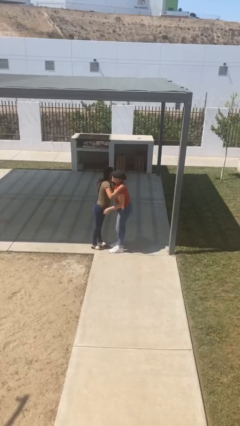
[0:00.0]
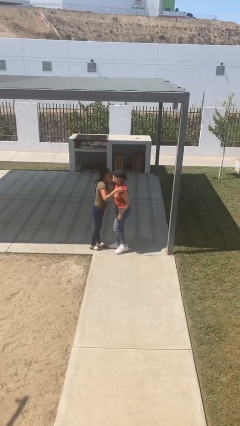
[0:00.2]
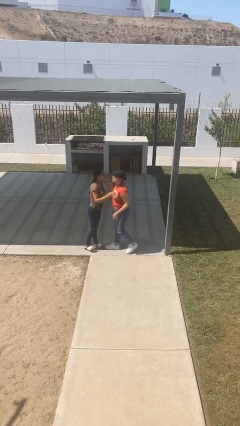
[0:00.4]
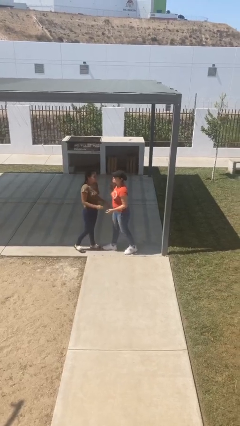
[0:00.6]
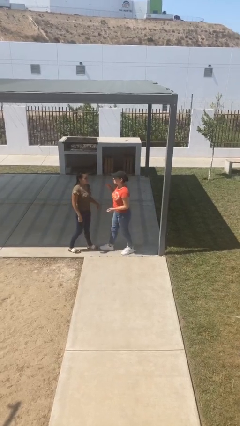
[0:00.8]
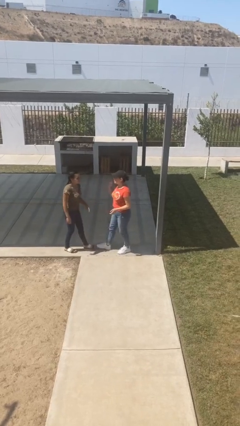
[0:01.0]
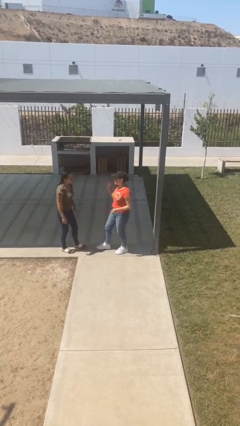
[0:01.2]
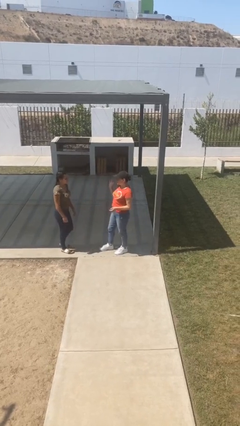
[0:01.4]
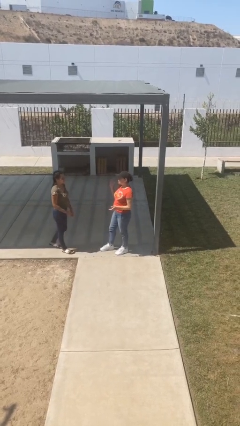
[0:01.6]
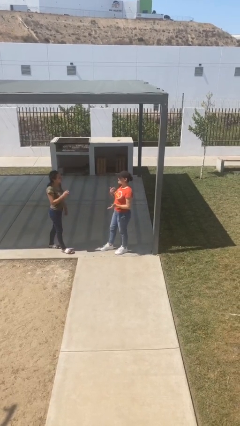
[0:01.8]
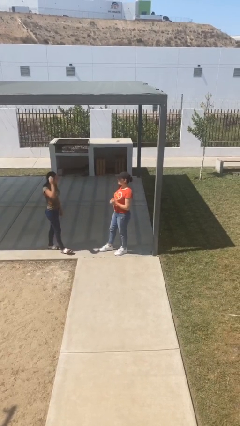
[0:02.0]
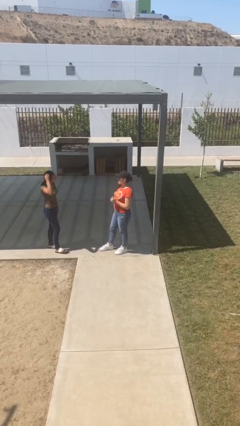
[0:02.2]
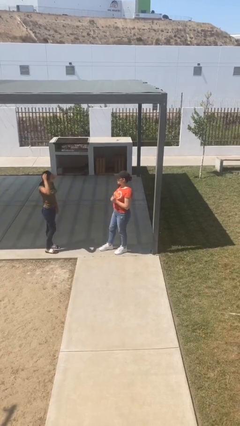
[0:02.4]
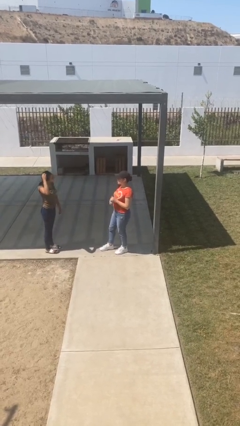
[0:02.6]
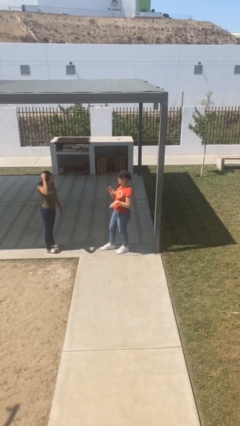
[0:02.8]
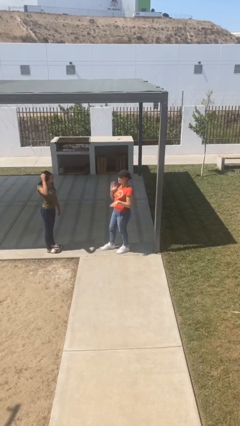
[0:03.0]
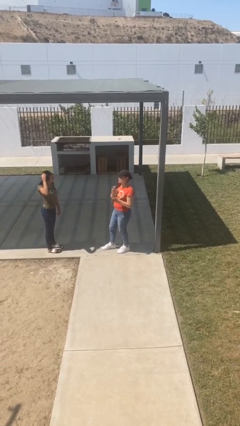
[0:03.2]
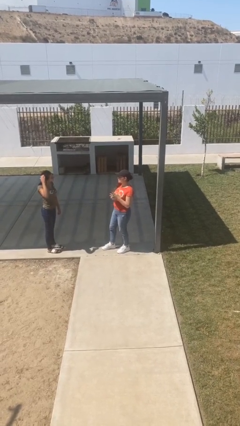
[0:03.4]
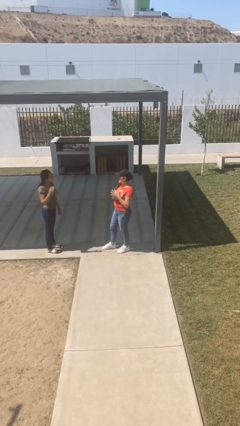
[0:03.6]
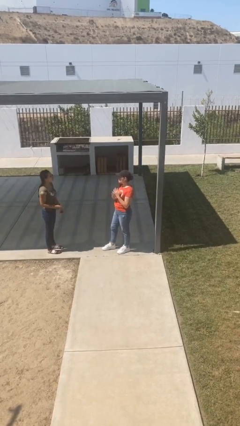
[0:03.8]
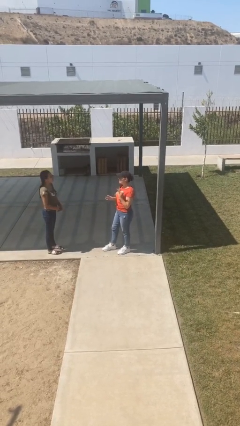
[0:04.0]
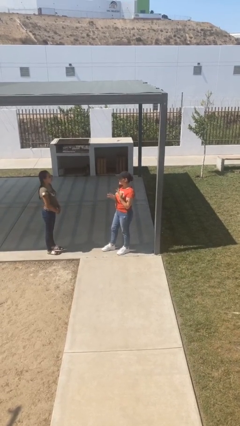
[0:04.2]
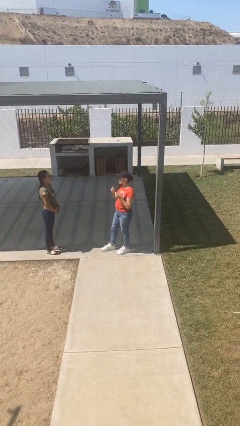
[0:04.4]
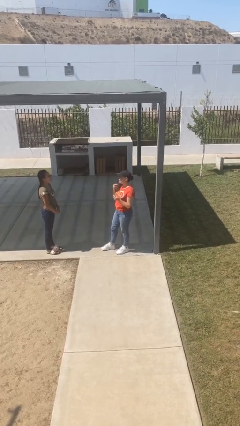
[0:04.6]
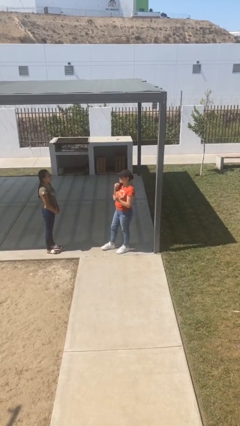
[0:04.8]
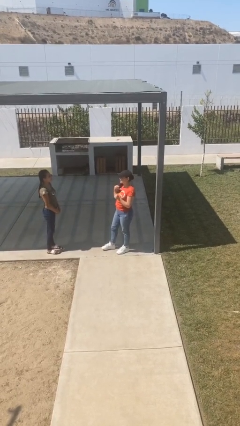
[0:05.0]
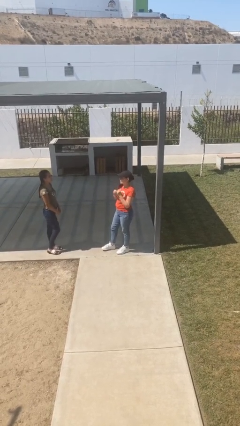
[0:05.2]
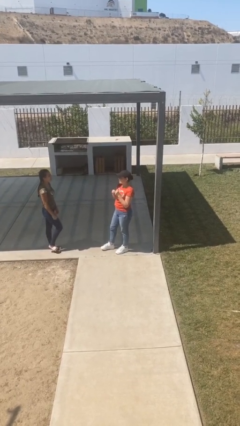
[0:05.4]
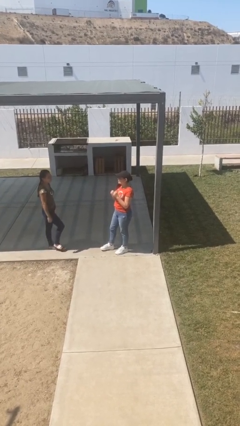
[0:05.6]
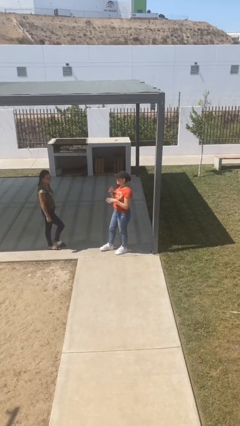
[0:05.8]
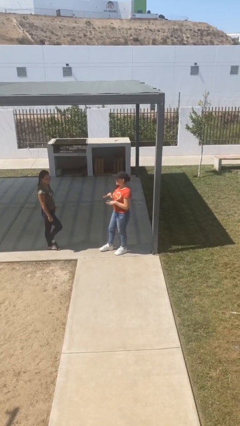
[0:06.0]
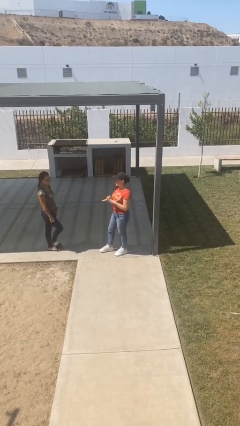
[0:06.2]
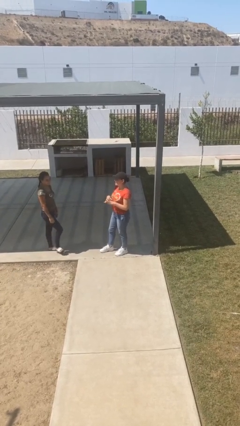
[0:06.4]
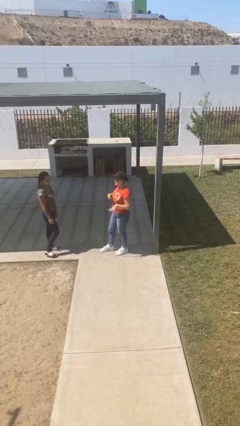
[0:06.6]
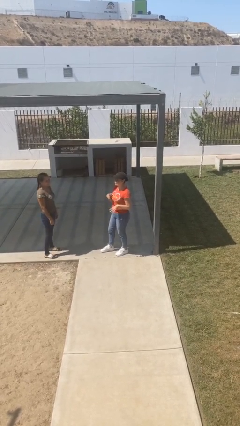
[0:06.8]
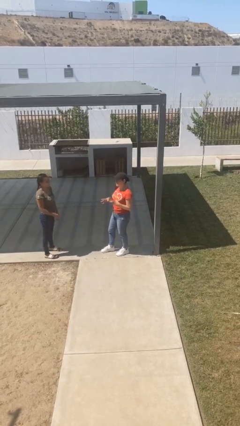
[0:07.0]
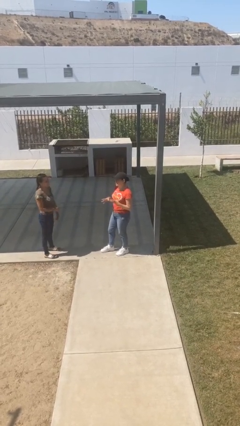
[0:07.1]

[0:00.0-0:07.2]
person talks to person

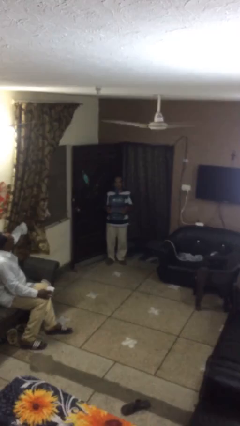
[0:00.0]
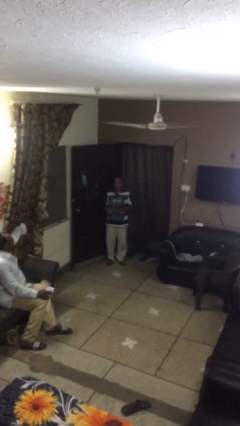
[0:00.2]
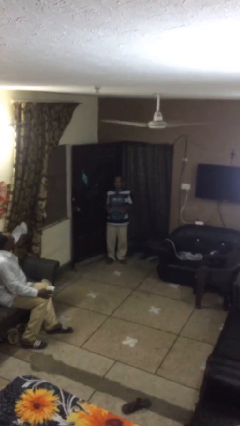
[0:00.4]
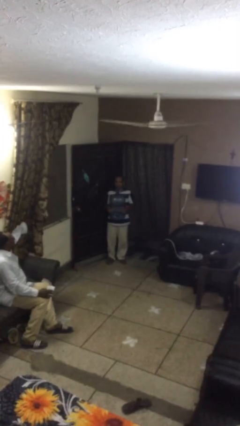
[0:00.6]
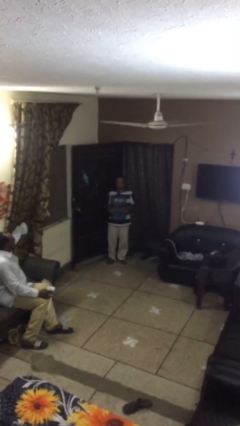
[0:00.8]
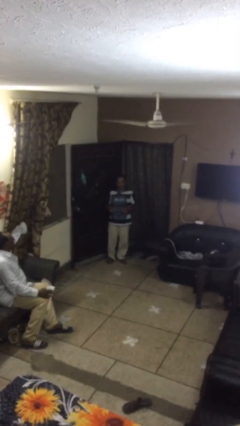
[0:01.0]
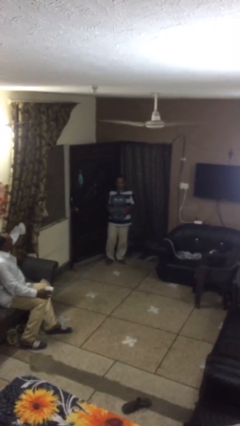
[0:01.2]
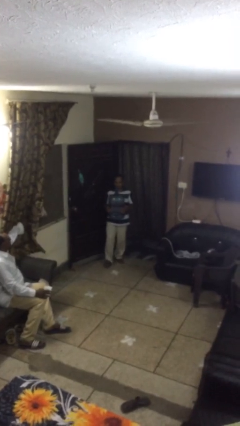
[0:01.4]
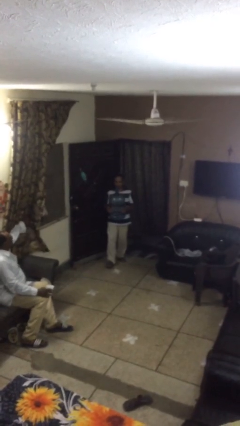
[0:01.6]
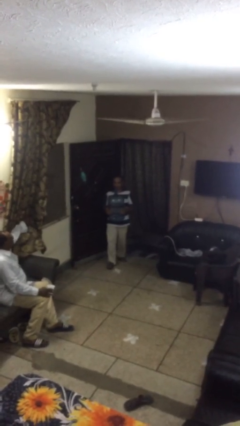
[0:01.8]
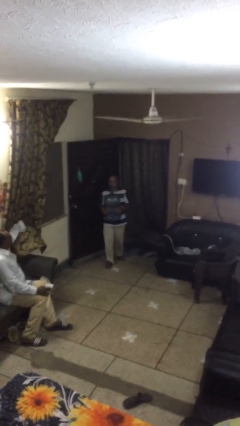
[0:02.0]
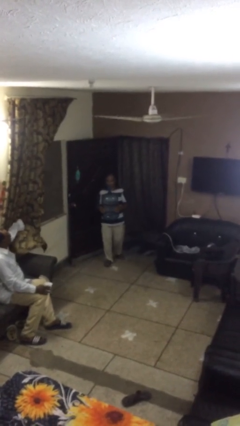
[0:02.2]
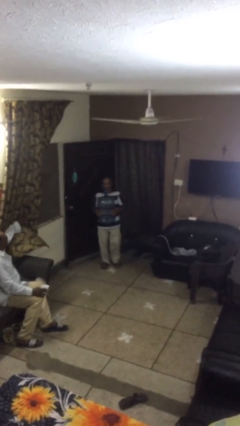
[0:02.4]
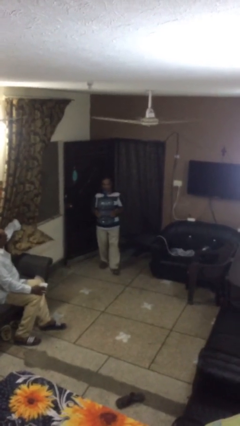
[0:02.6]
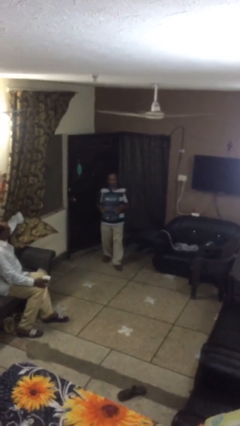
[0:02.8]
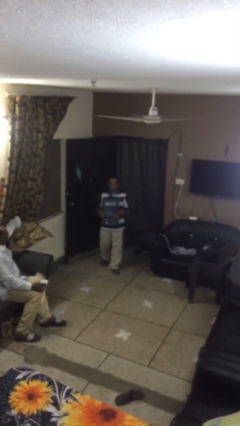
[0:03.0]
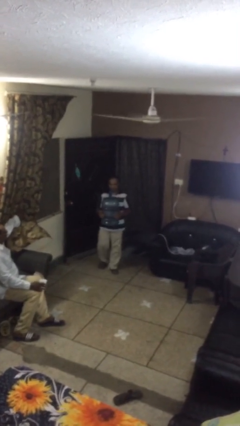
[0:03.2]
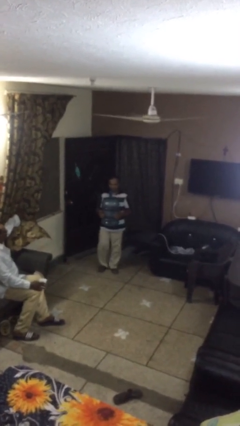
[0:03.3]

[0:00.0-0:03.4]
person carries heavy object

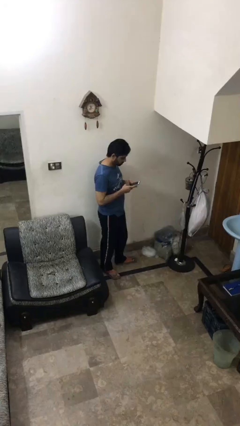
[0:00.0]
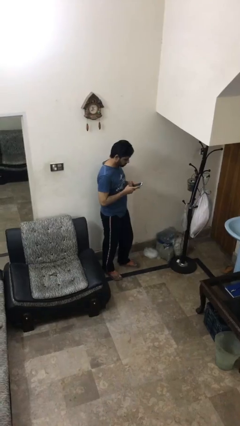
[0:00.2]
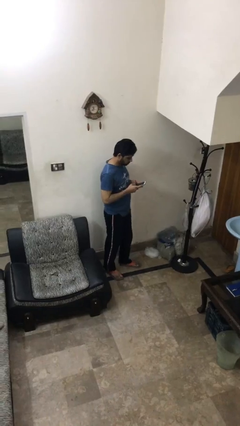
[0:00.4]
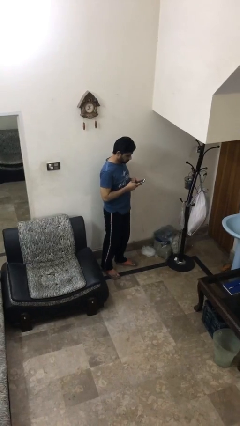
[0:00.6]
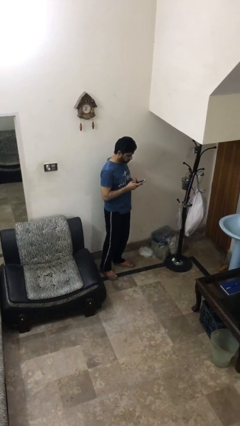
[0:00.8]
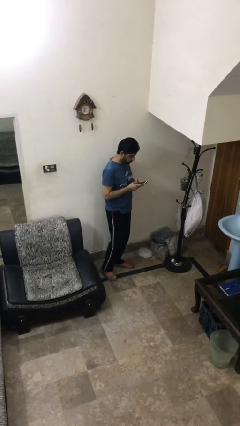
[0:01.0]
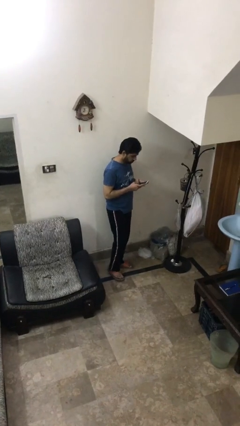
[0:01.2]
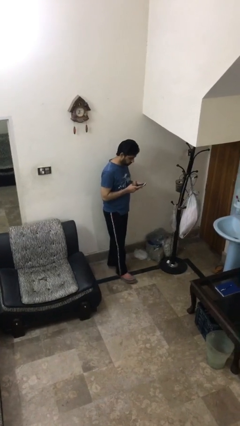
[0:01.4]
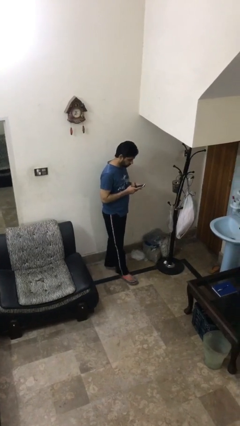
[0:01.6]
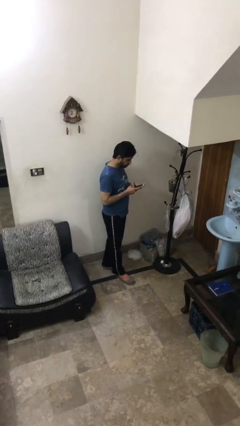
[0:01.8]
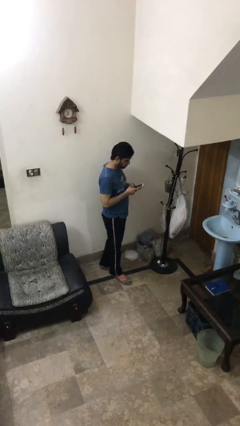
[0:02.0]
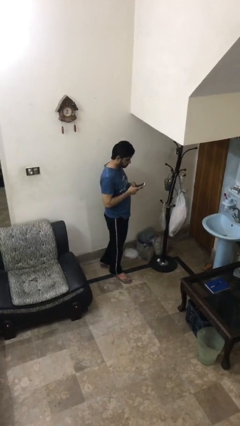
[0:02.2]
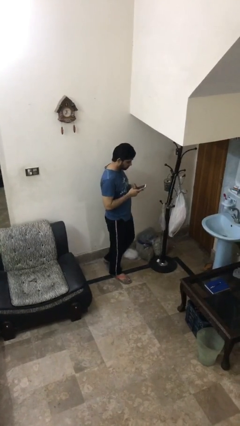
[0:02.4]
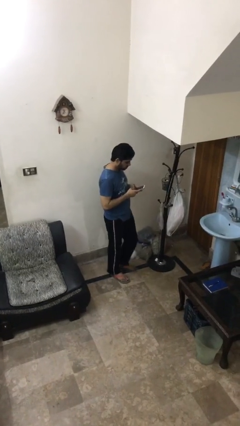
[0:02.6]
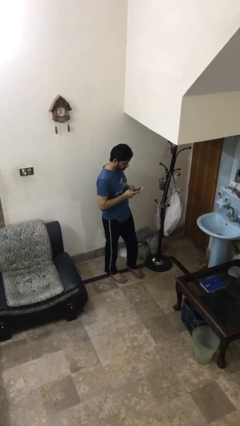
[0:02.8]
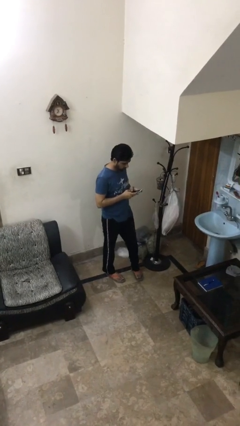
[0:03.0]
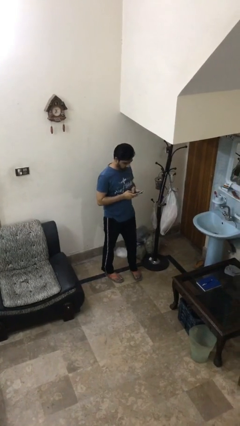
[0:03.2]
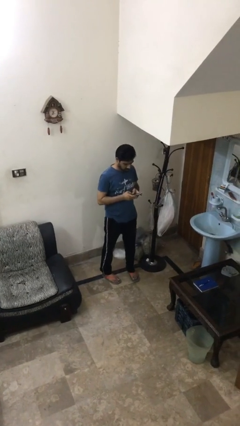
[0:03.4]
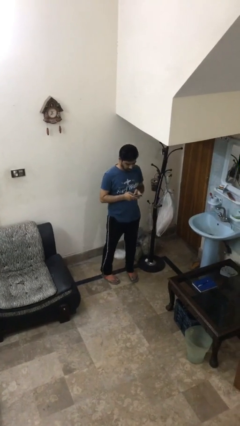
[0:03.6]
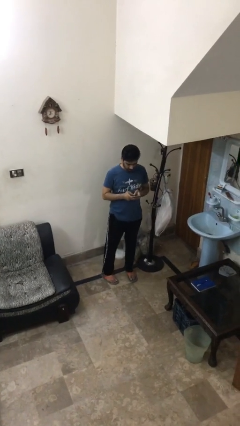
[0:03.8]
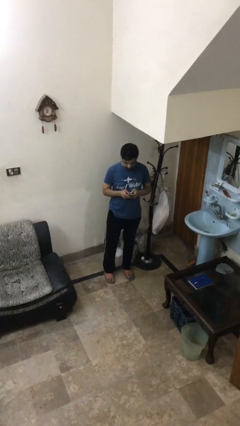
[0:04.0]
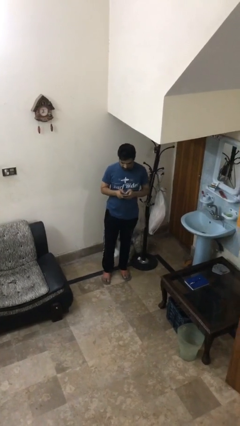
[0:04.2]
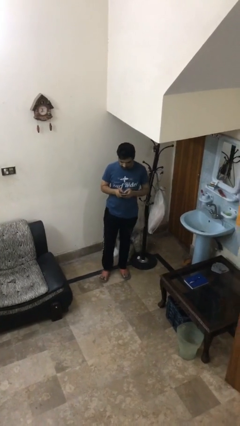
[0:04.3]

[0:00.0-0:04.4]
person texts on phone

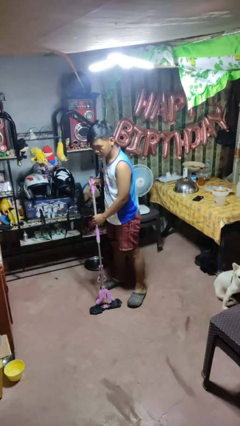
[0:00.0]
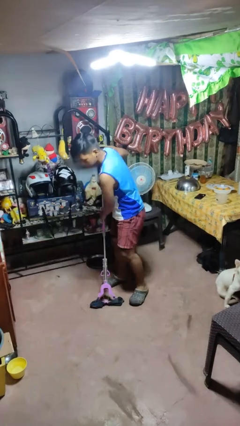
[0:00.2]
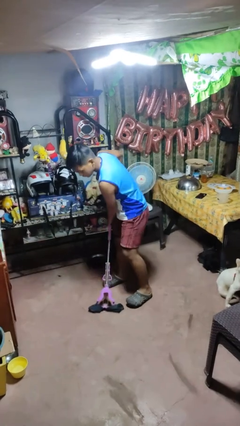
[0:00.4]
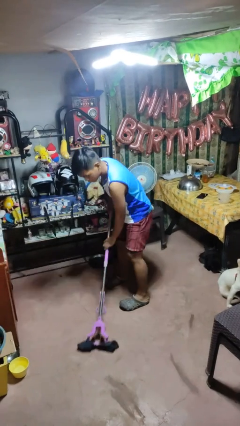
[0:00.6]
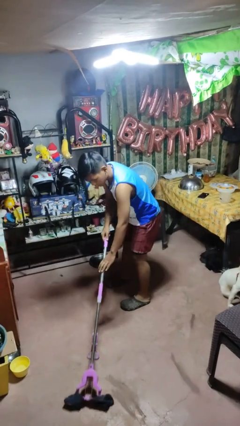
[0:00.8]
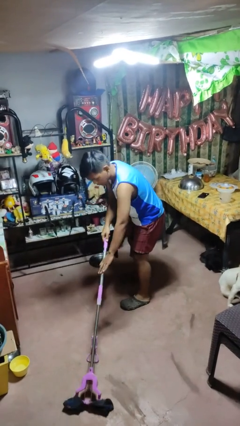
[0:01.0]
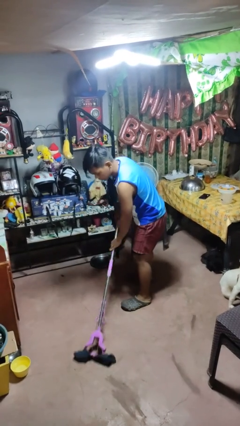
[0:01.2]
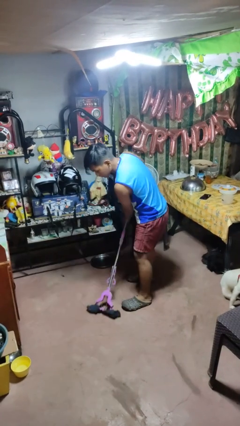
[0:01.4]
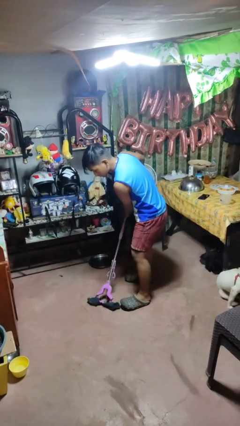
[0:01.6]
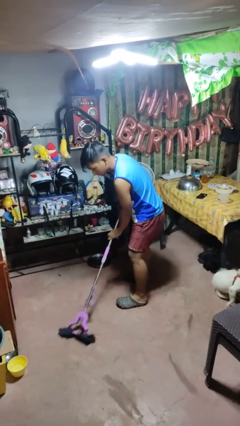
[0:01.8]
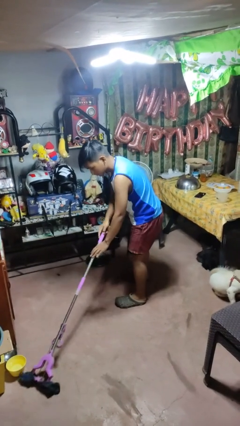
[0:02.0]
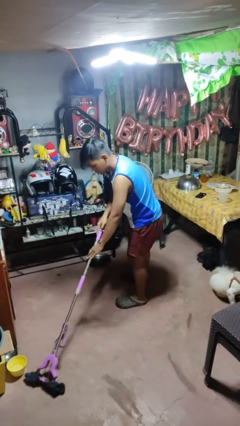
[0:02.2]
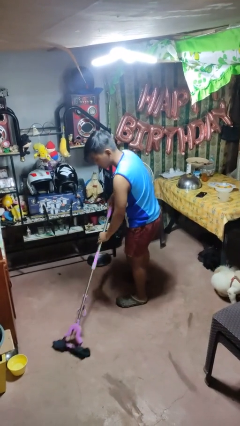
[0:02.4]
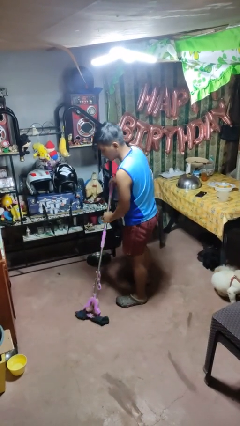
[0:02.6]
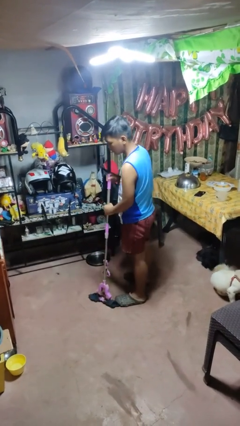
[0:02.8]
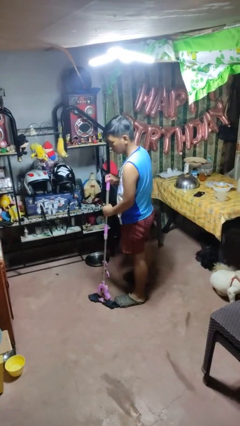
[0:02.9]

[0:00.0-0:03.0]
person mops
